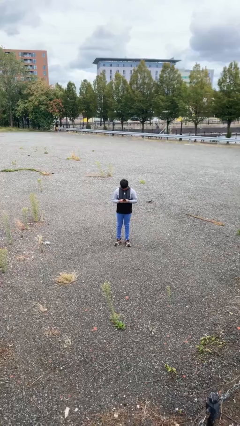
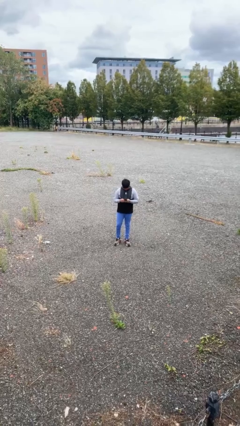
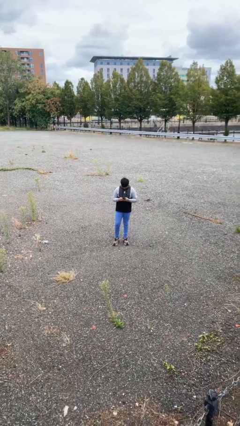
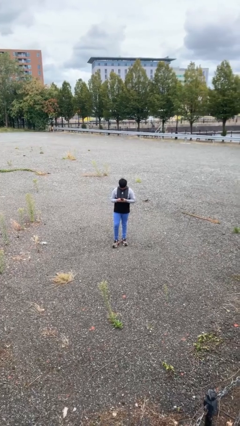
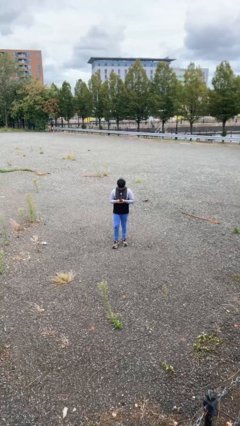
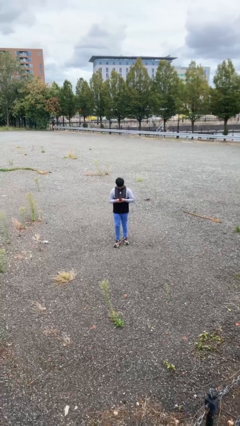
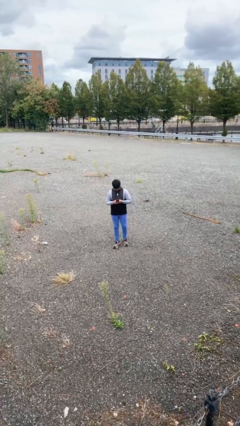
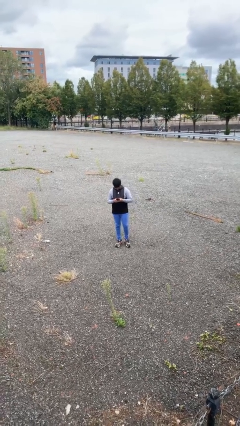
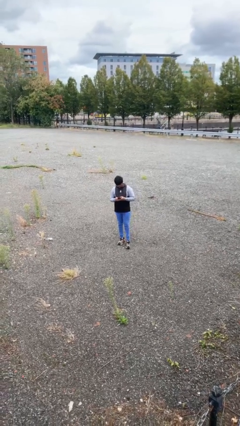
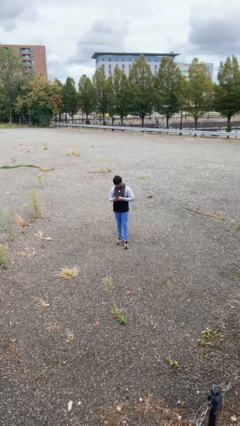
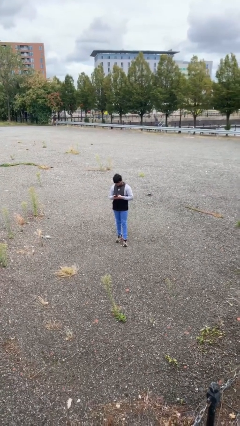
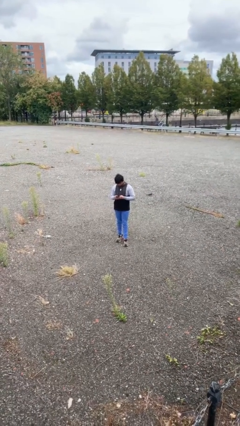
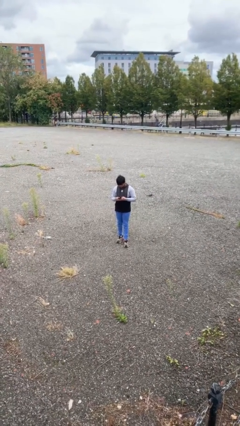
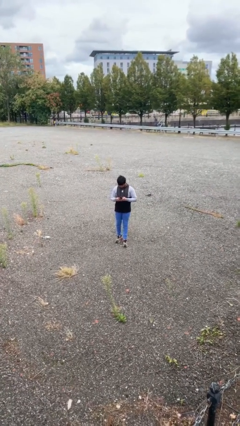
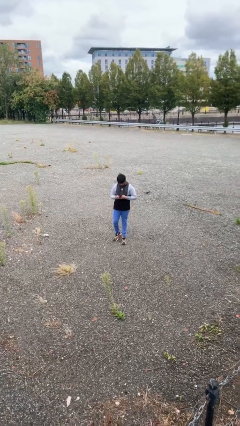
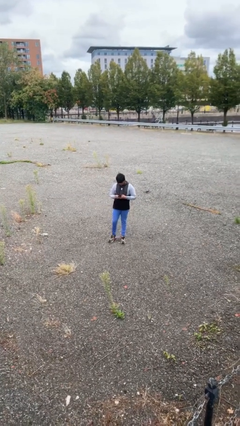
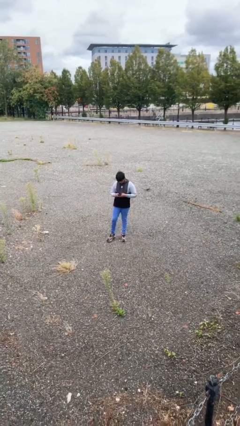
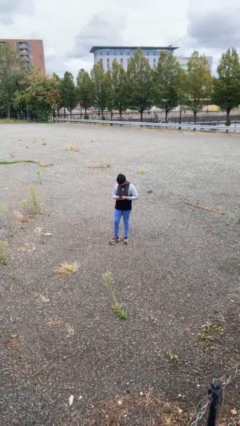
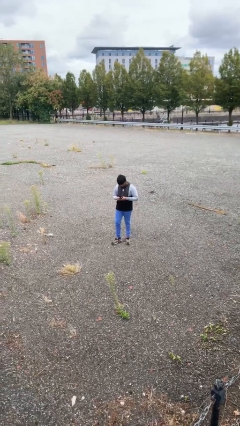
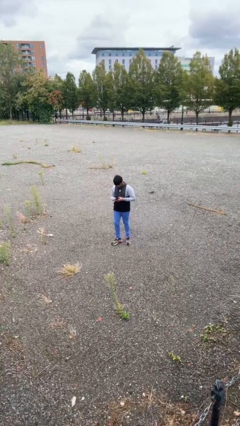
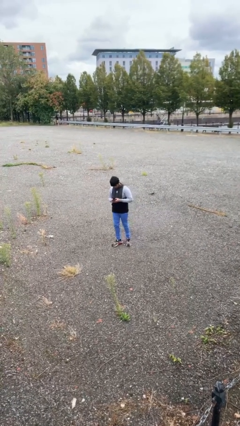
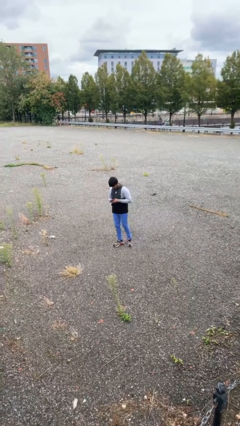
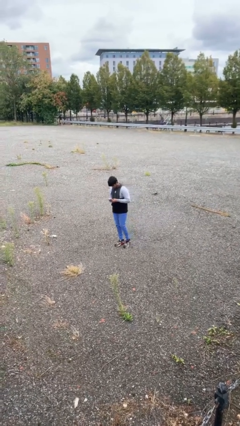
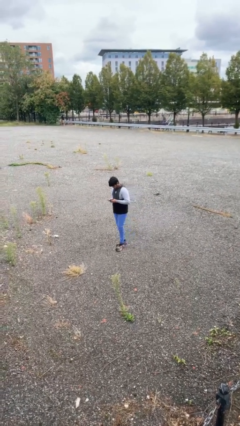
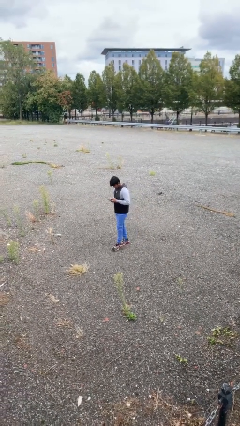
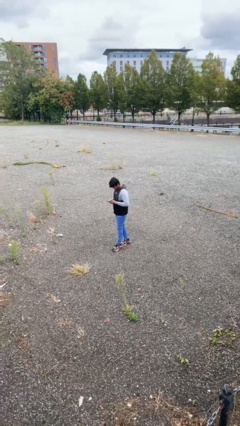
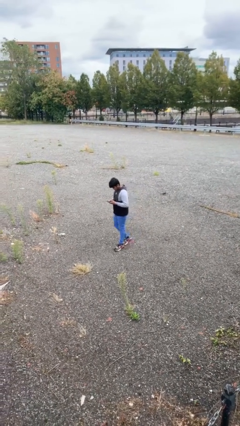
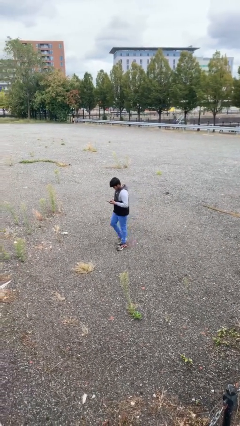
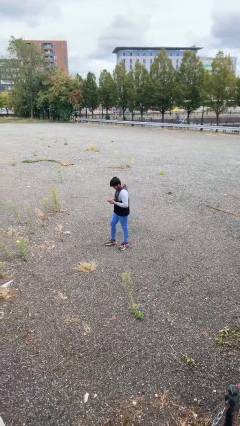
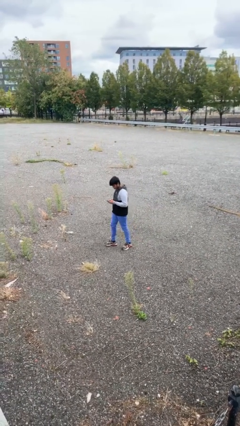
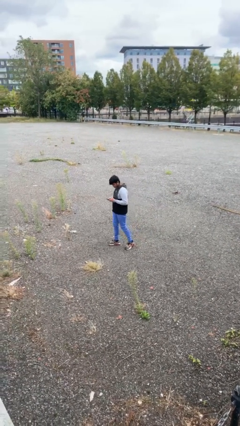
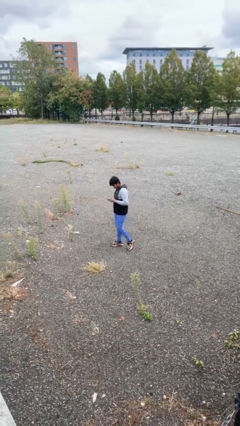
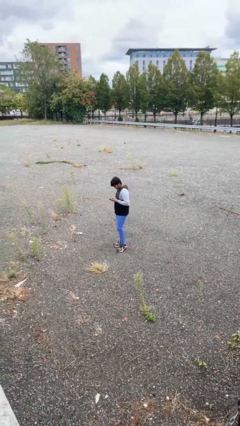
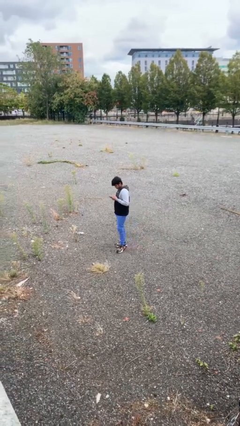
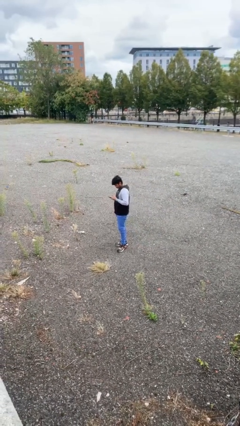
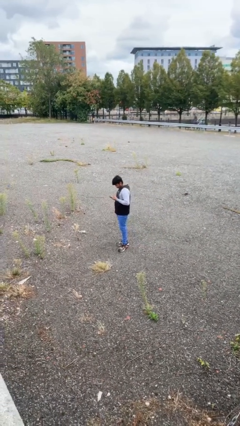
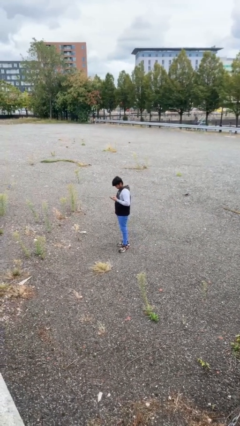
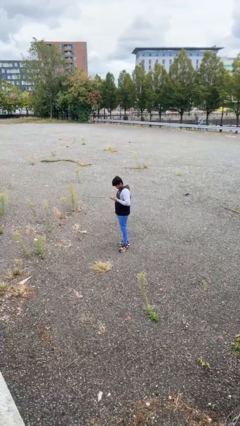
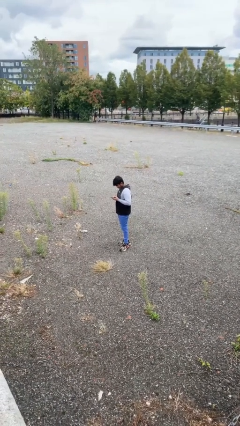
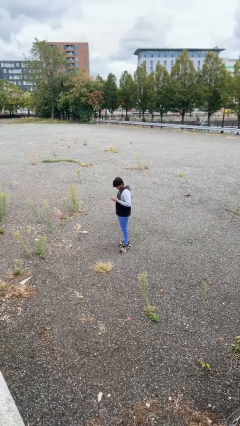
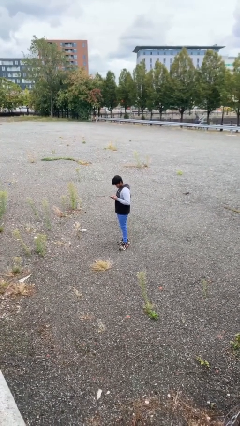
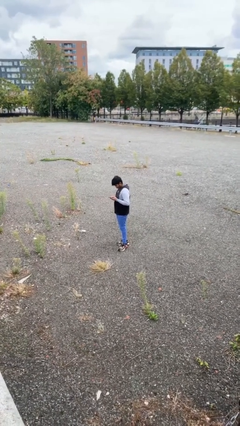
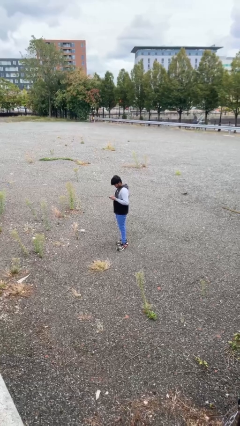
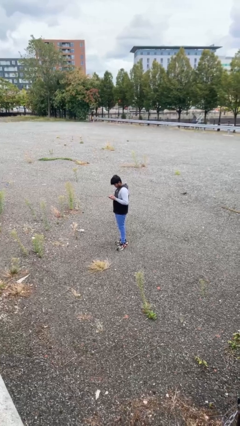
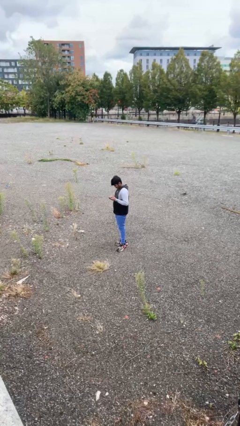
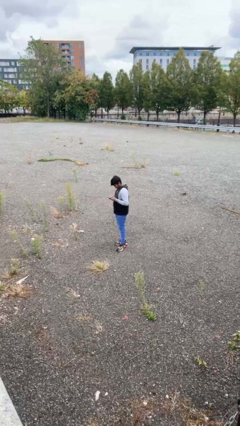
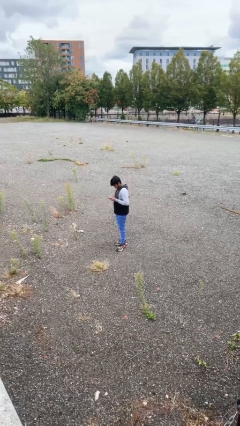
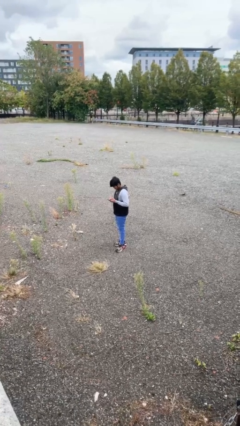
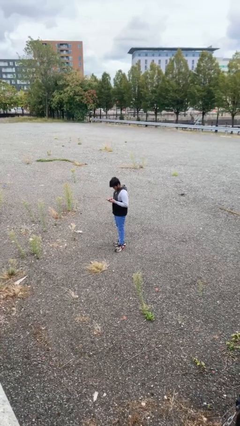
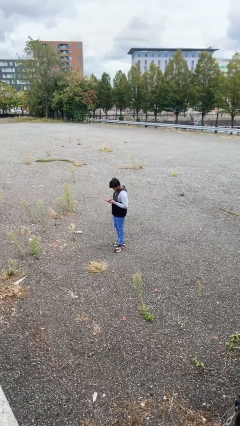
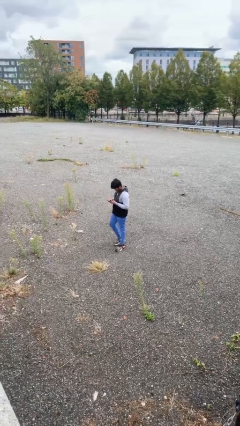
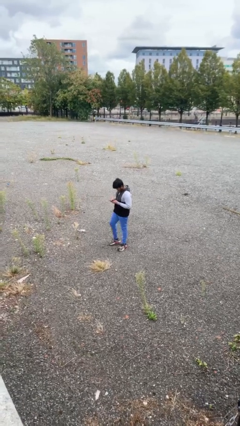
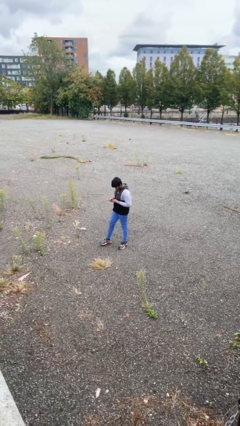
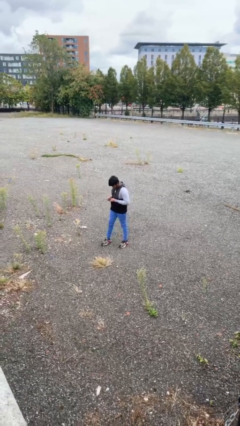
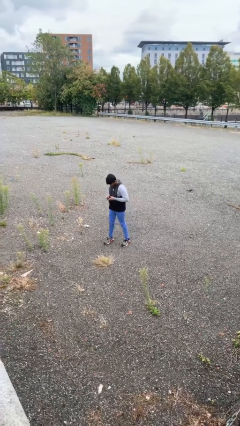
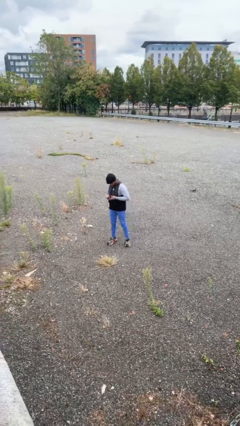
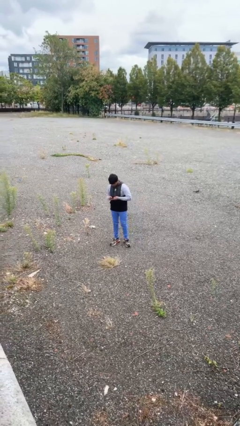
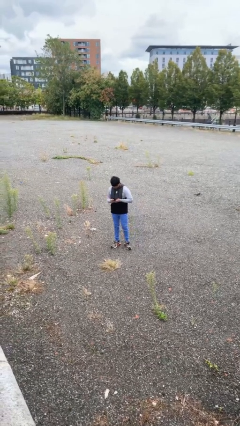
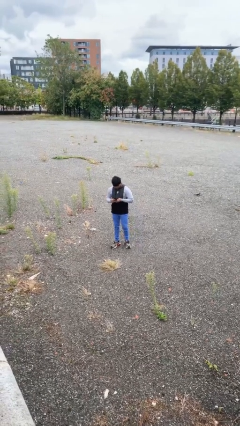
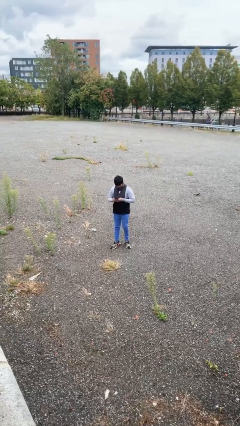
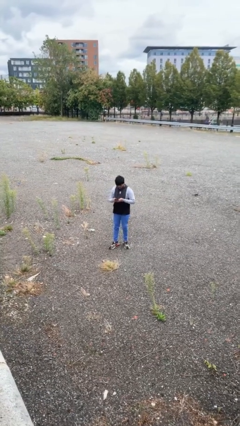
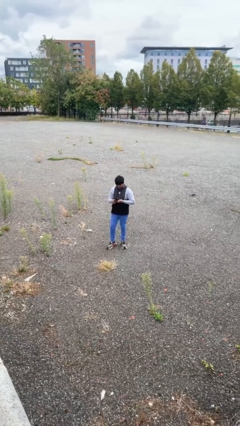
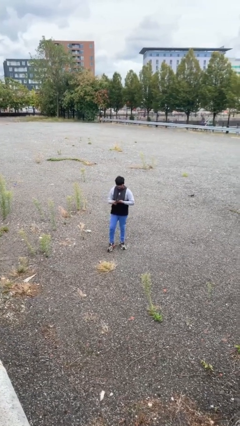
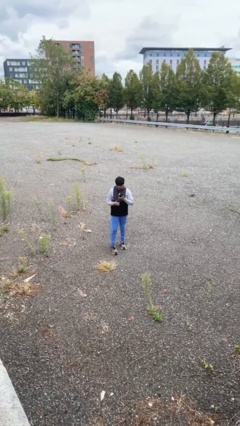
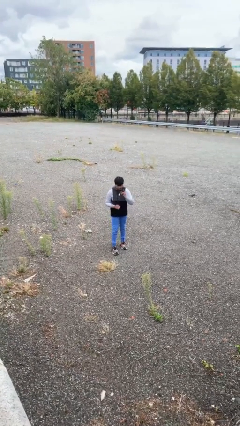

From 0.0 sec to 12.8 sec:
person texts on phone

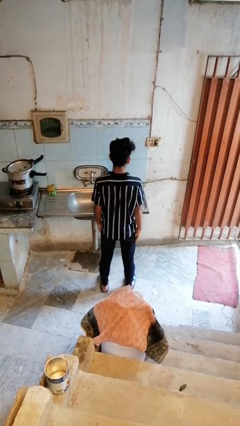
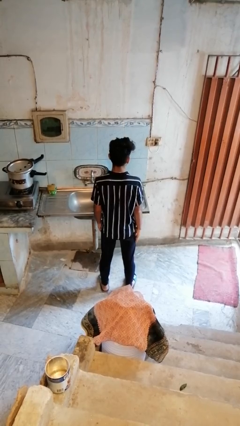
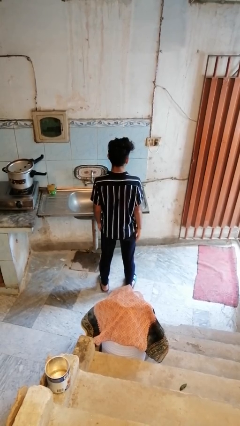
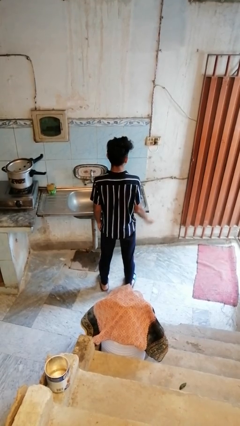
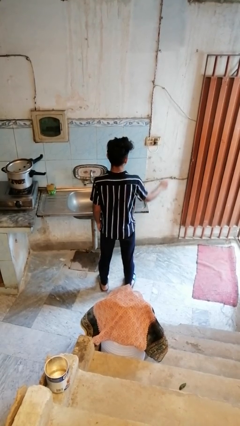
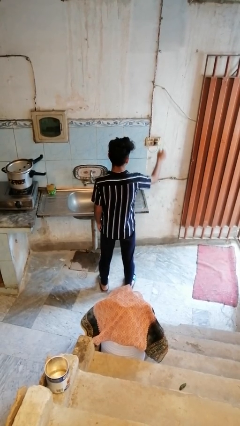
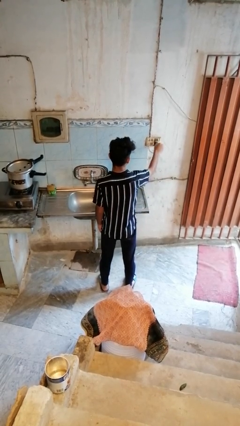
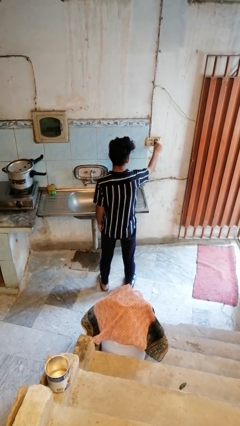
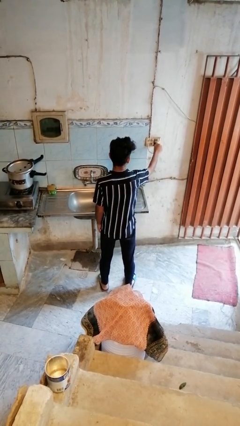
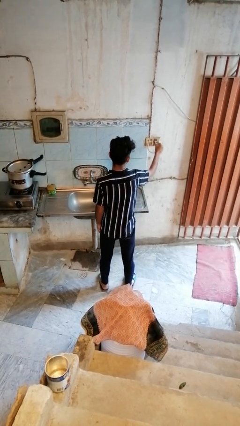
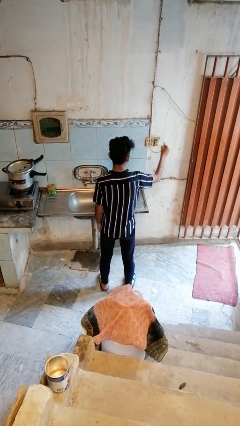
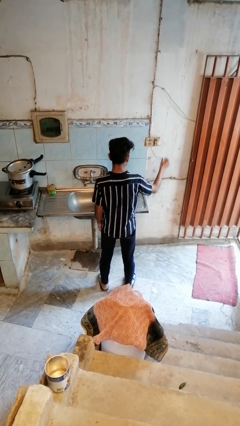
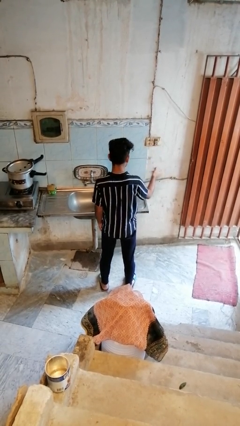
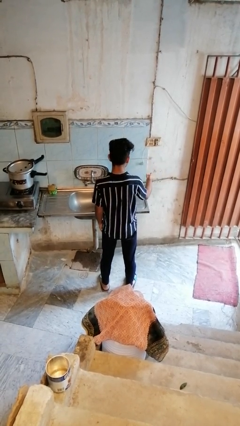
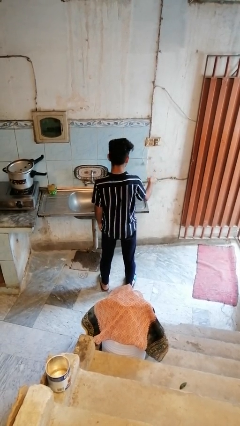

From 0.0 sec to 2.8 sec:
person unplugs from electrical socket

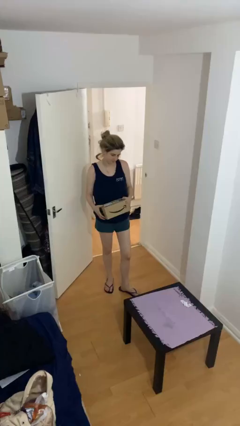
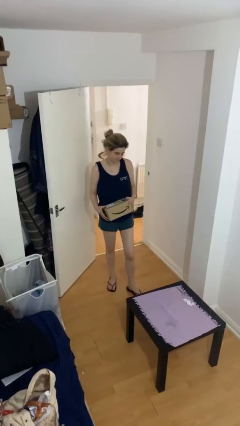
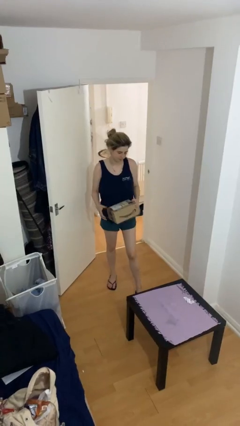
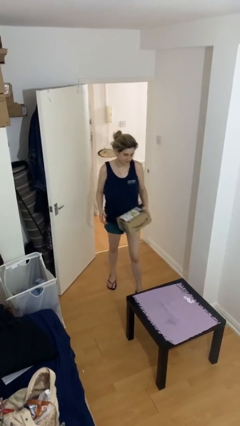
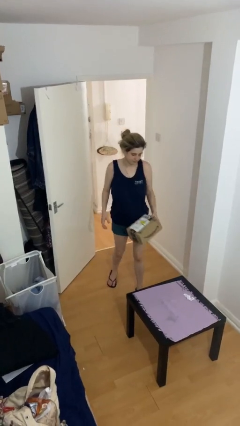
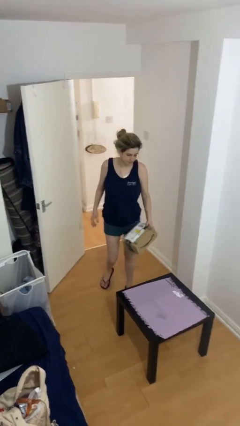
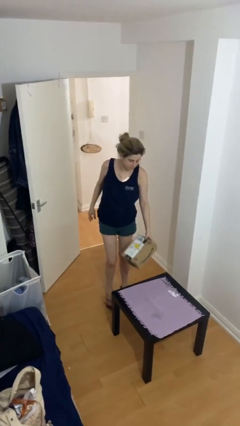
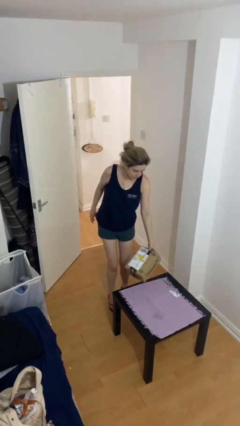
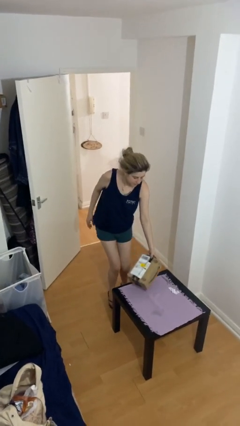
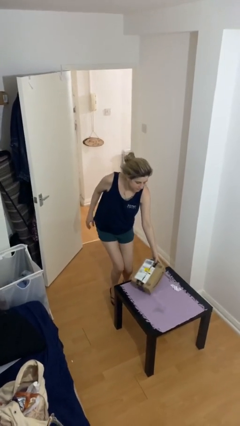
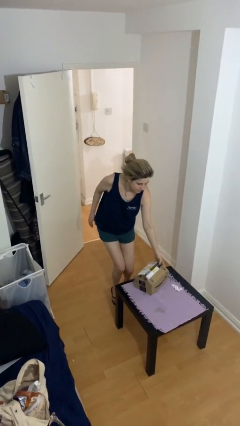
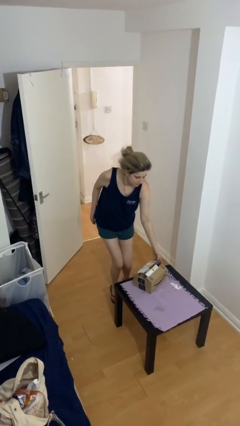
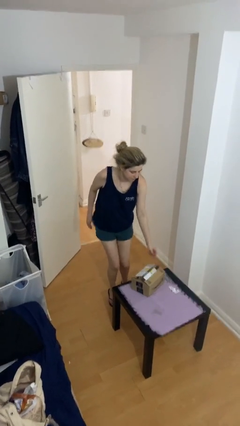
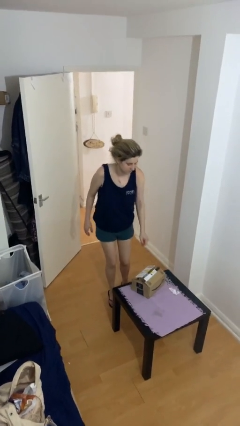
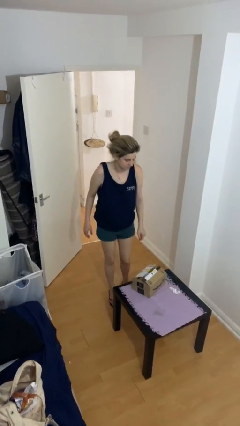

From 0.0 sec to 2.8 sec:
person puts down object on table
